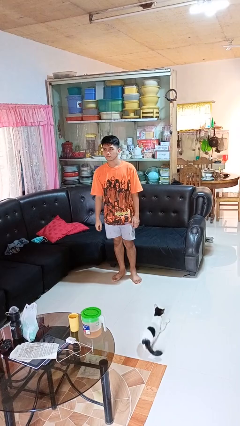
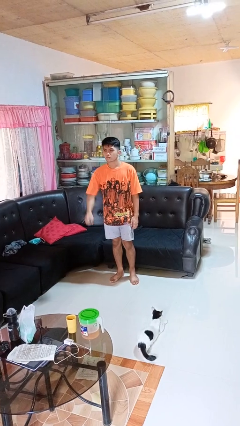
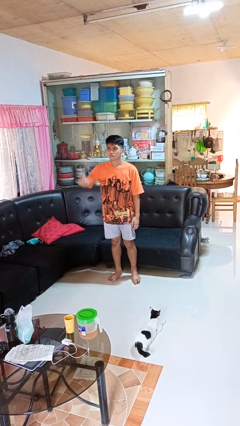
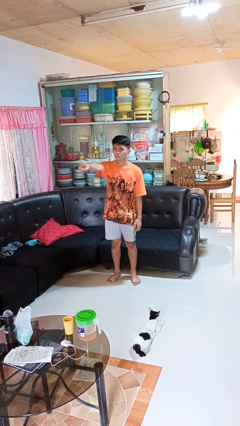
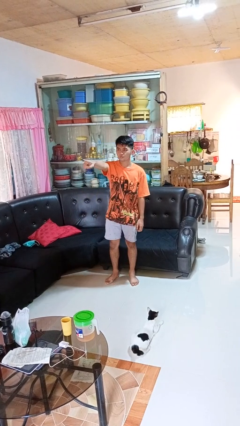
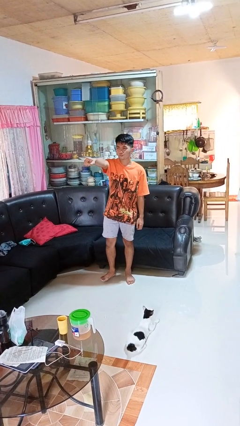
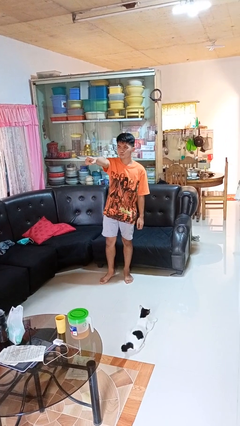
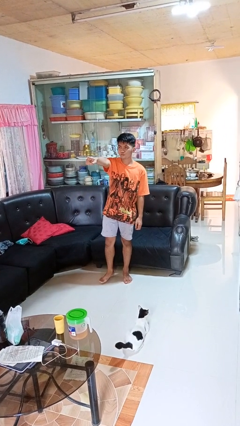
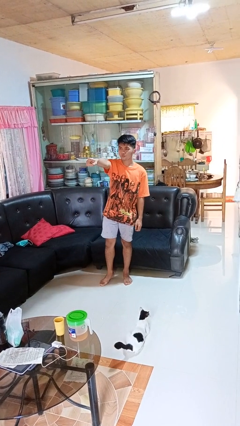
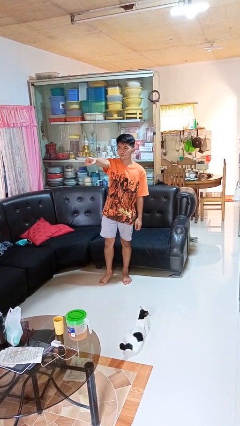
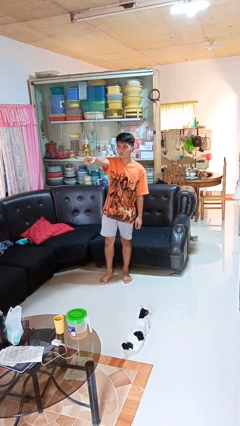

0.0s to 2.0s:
person points at person

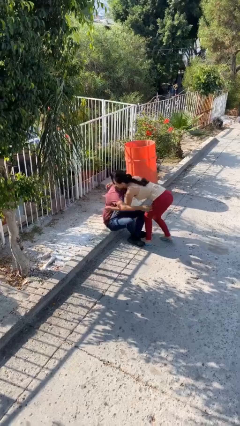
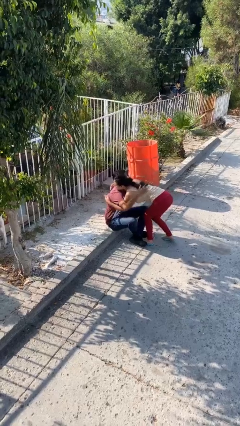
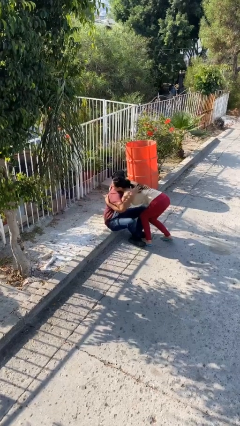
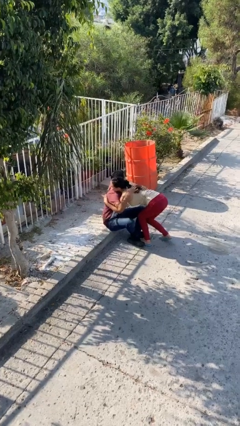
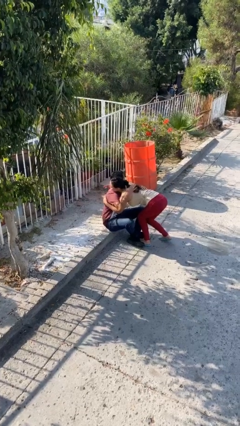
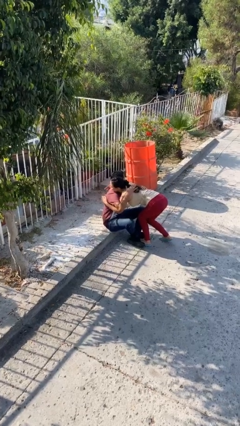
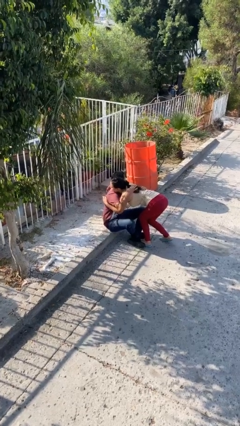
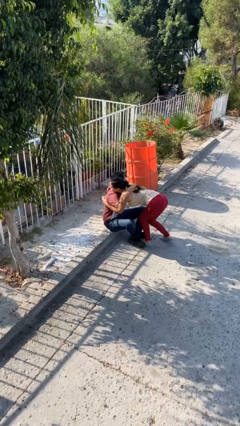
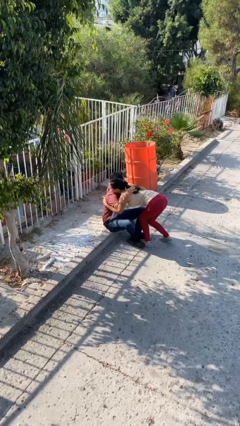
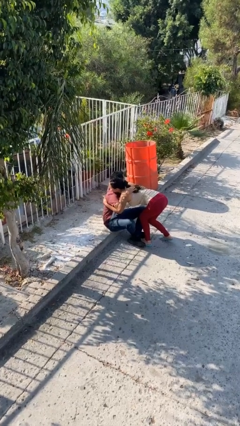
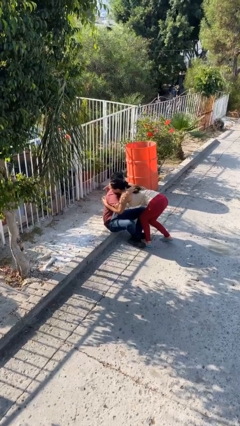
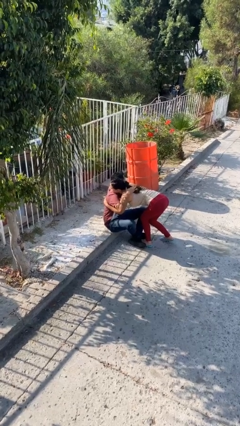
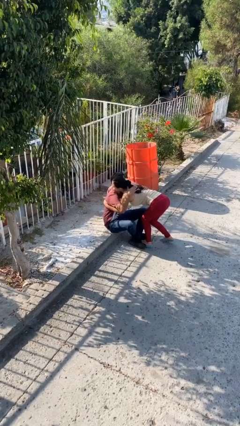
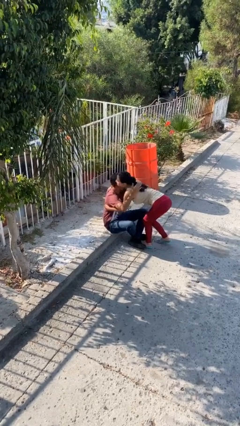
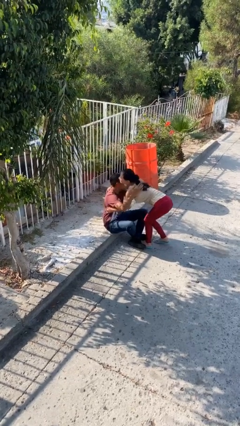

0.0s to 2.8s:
person embraces person

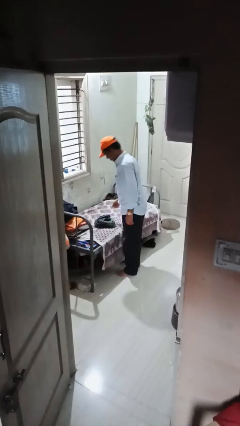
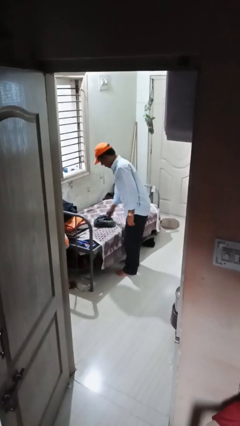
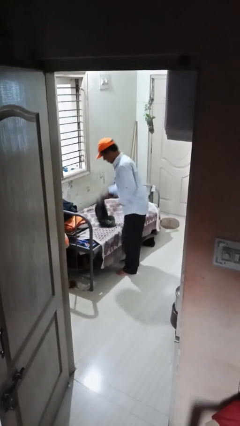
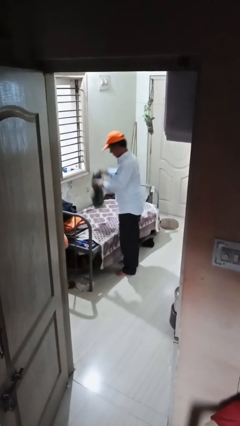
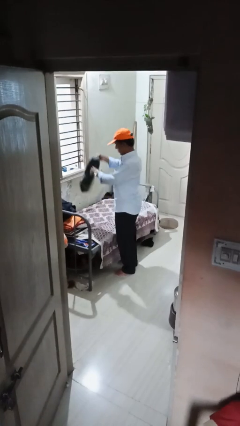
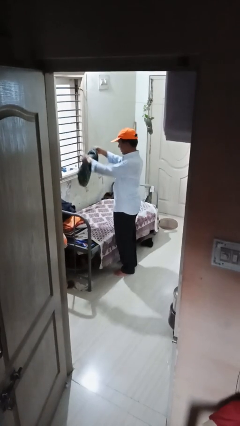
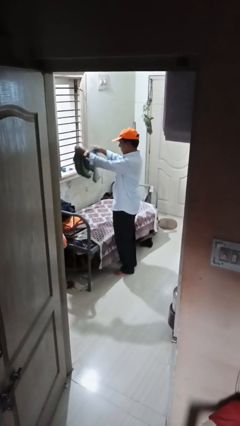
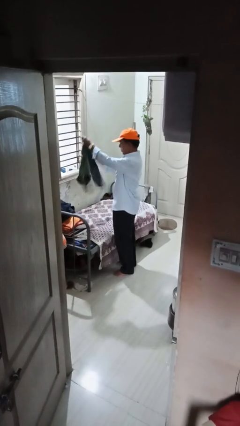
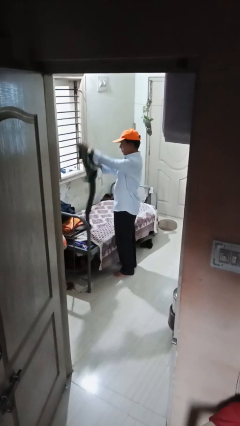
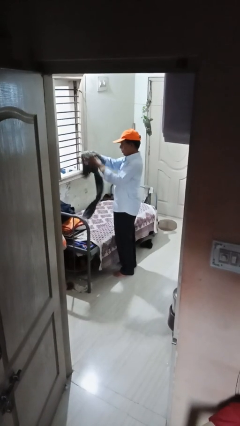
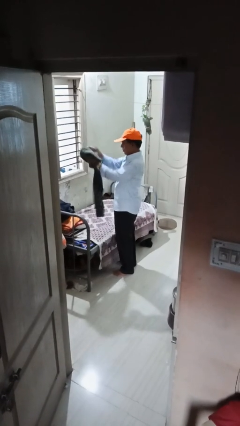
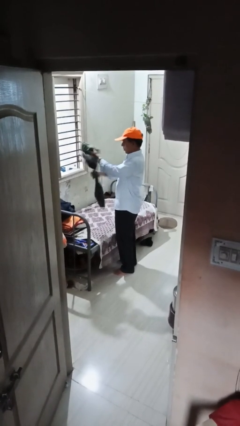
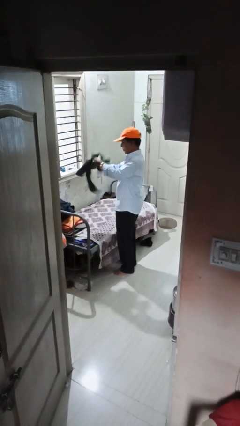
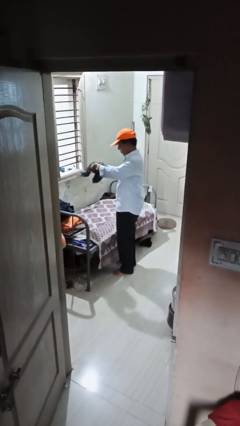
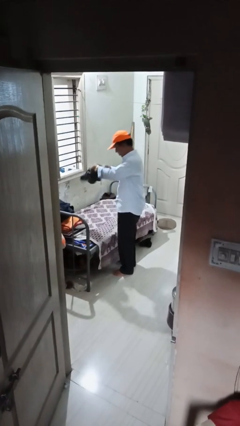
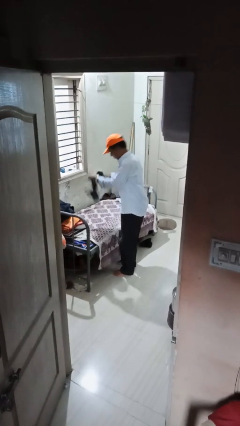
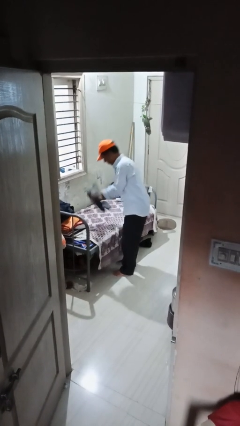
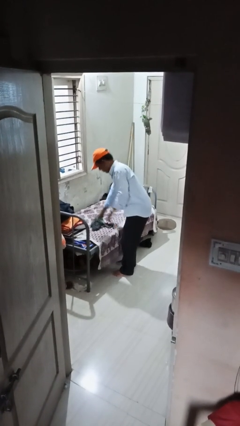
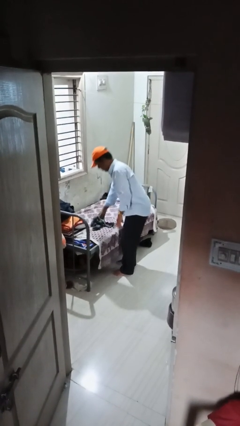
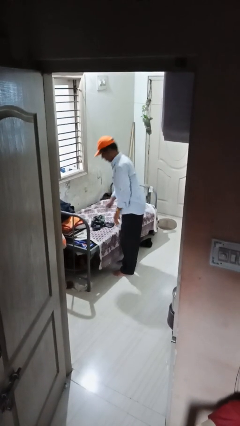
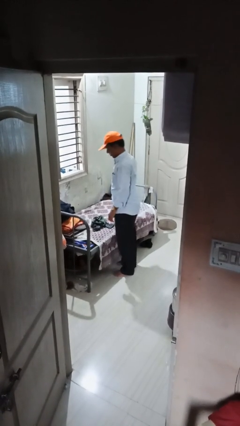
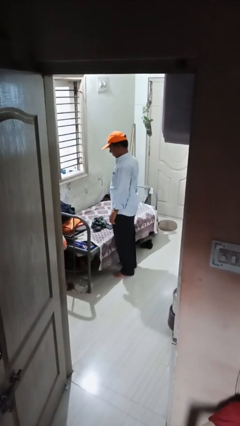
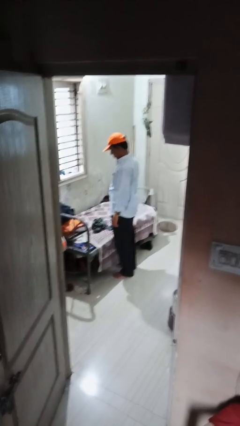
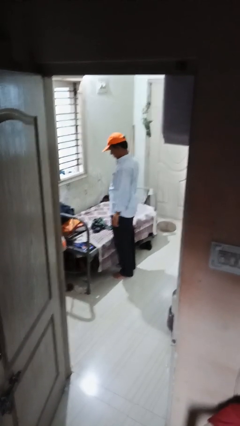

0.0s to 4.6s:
person folds shirt

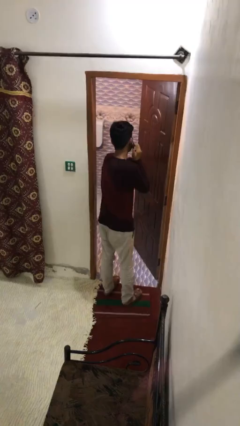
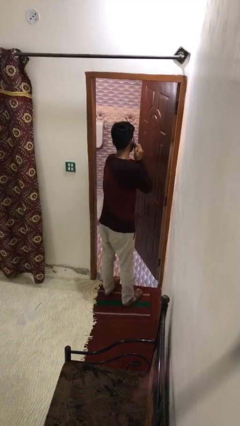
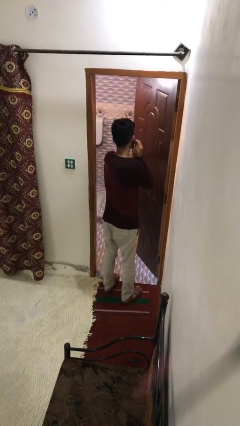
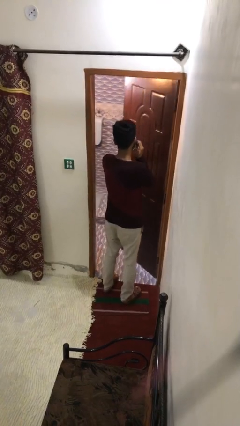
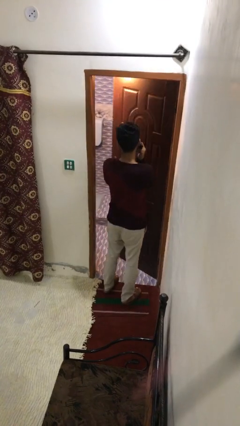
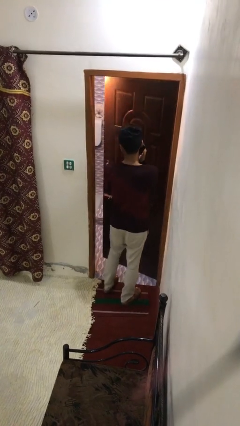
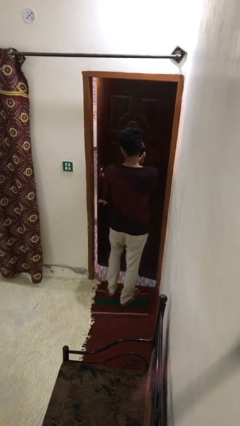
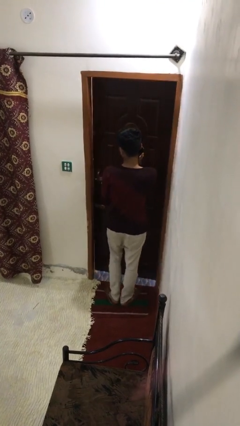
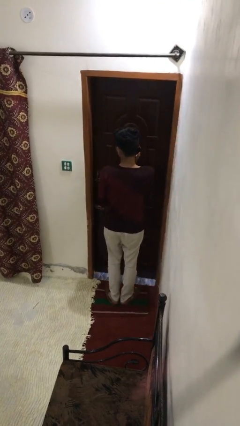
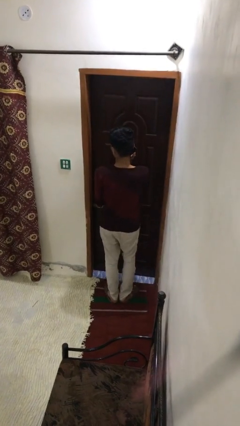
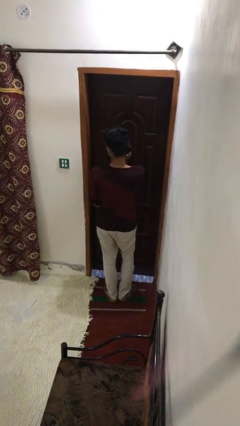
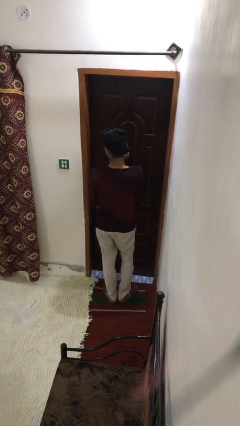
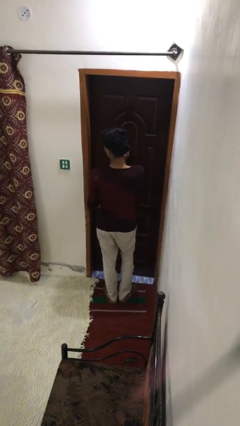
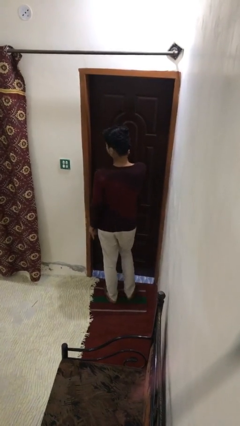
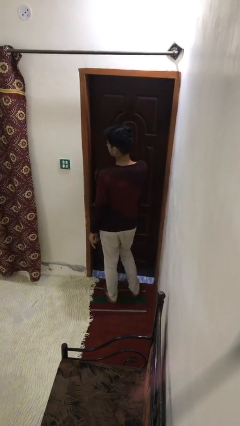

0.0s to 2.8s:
person closes facility door

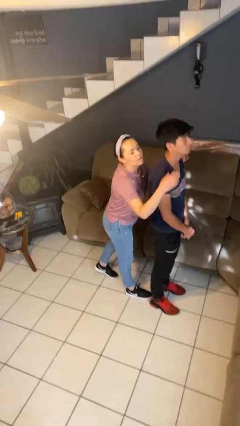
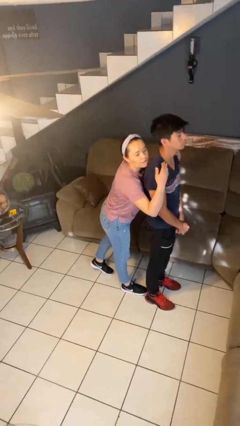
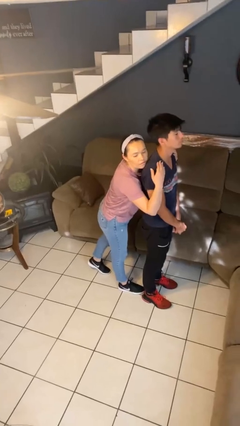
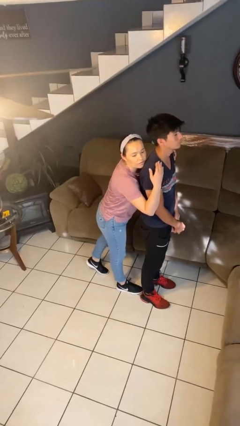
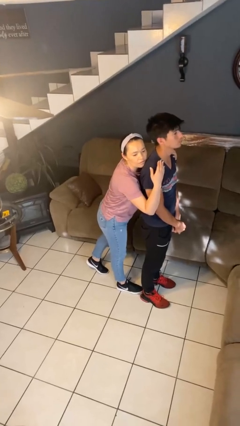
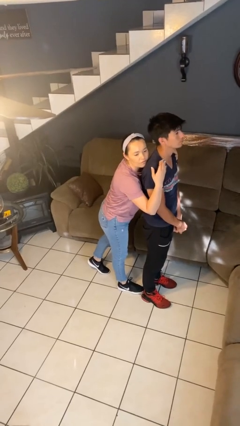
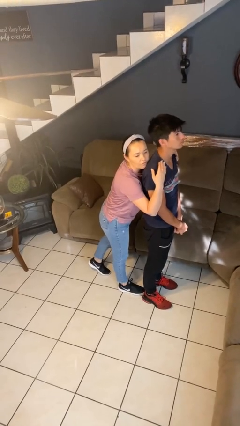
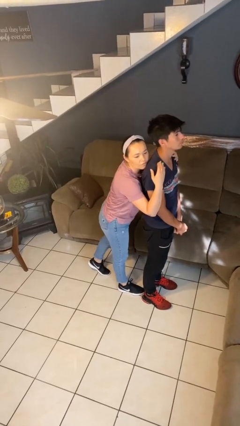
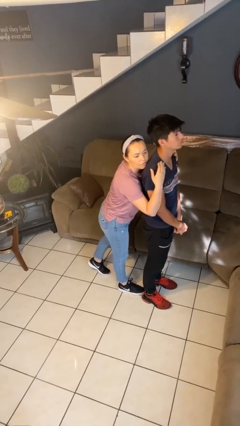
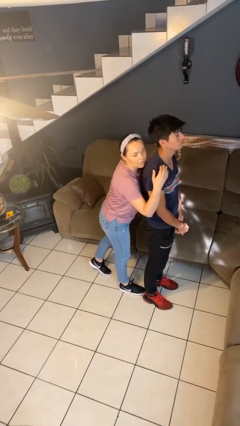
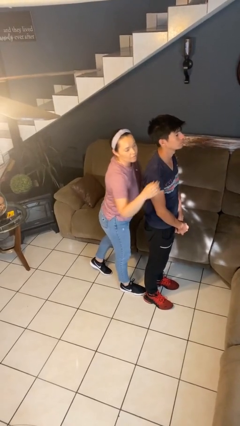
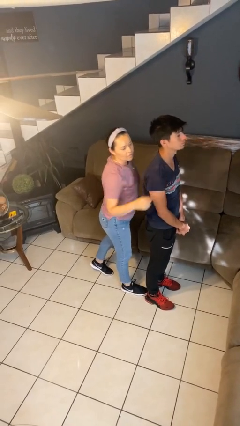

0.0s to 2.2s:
person hugs person from behind

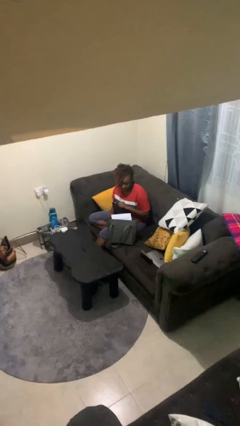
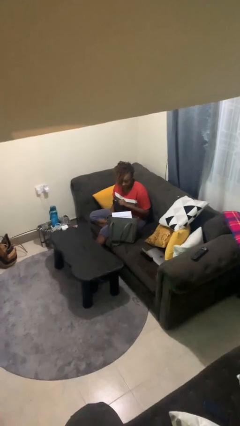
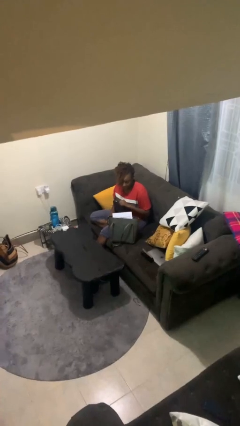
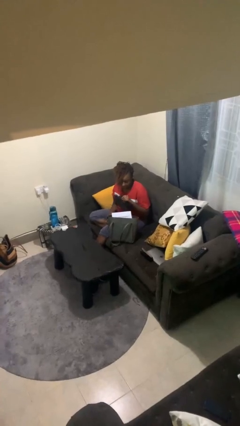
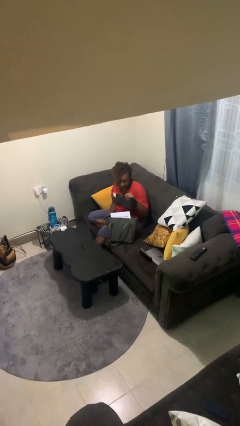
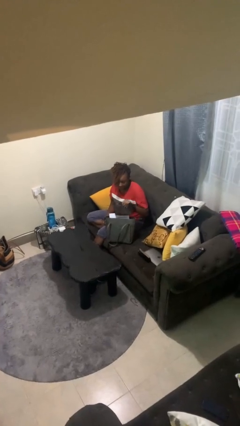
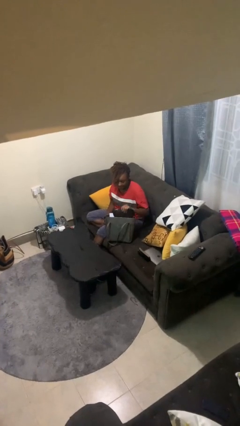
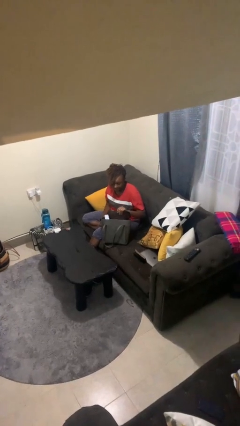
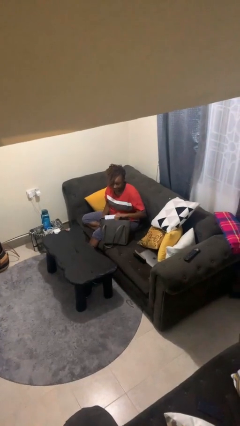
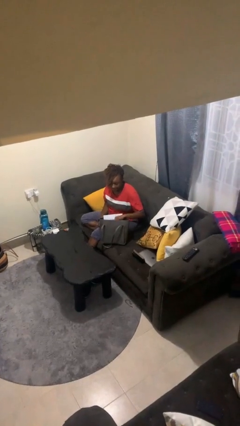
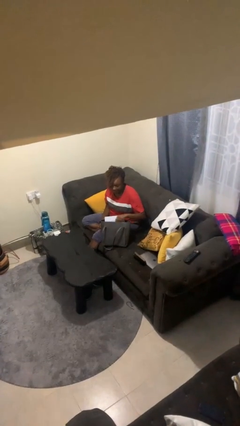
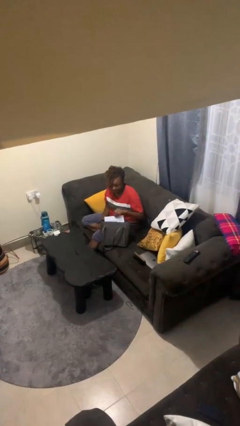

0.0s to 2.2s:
person puts object into purse

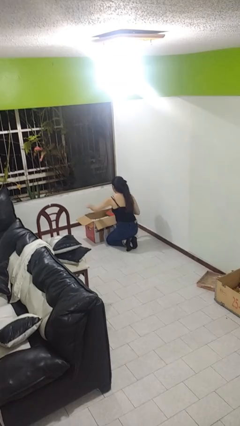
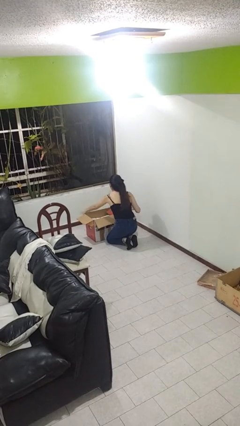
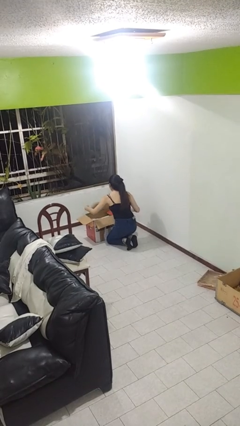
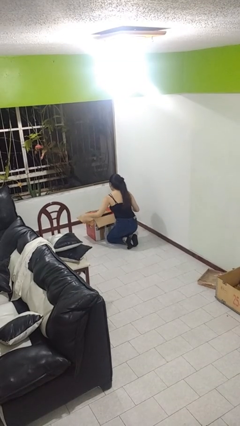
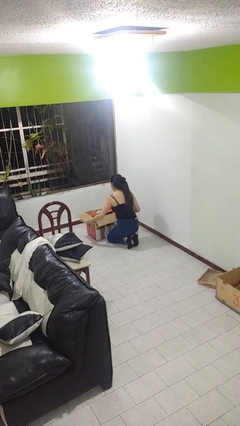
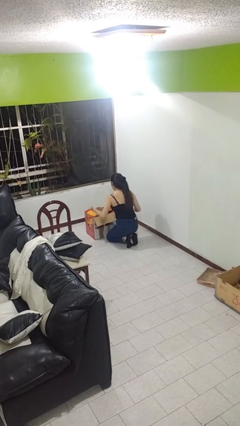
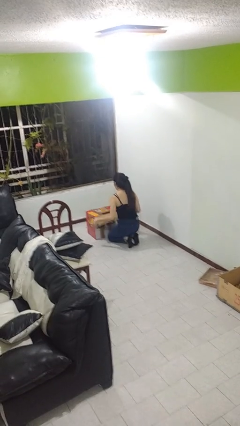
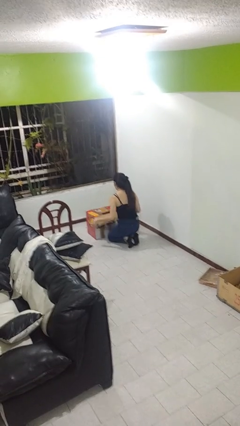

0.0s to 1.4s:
person closes box
